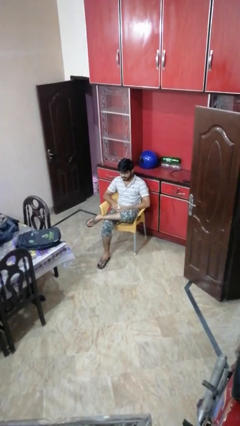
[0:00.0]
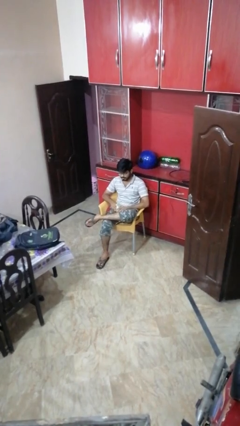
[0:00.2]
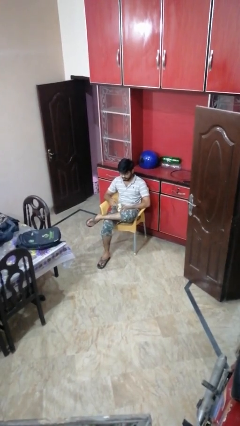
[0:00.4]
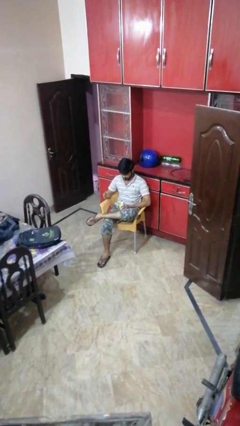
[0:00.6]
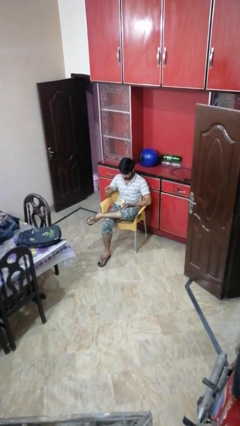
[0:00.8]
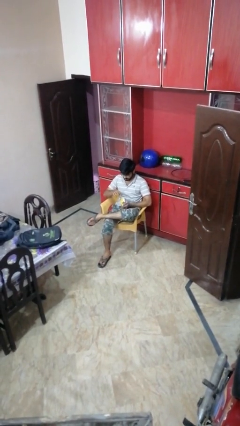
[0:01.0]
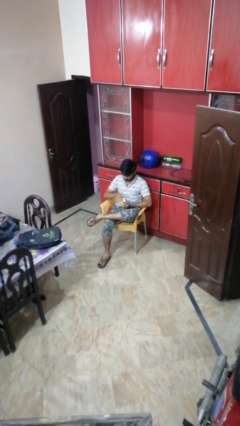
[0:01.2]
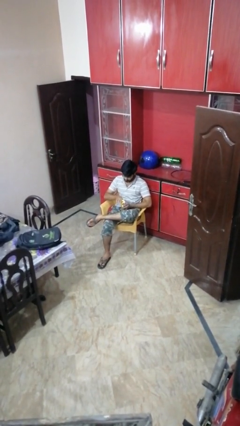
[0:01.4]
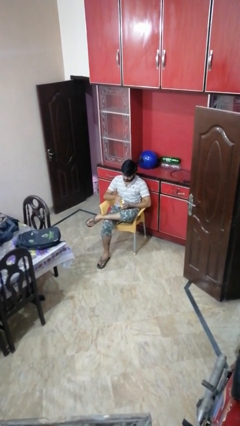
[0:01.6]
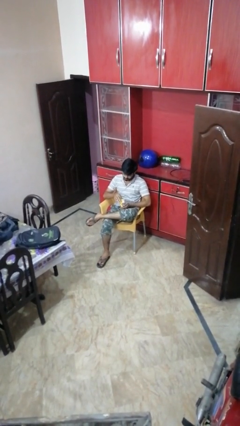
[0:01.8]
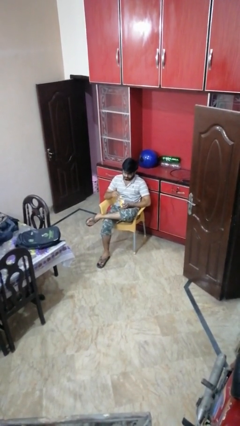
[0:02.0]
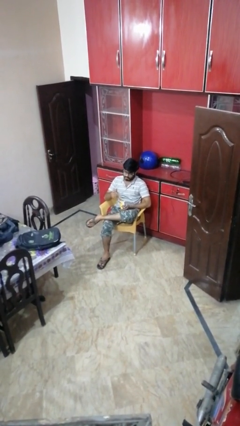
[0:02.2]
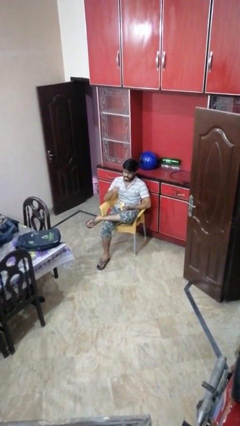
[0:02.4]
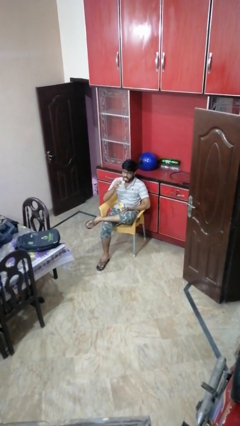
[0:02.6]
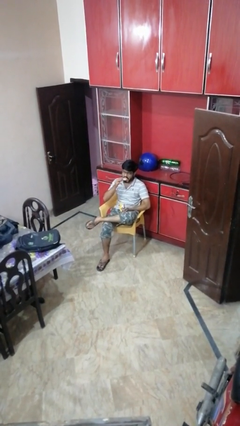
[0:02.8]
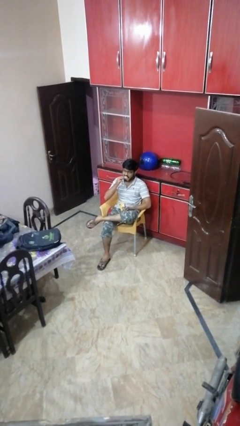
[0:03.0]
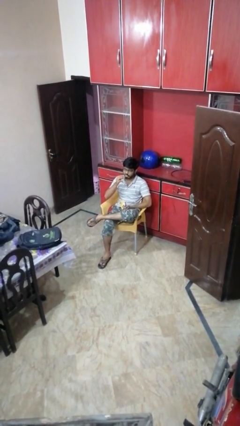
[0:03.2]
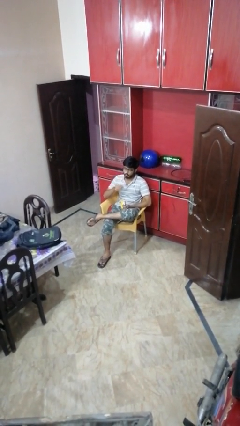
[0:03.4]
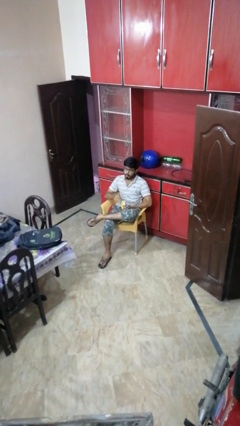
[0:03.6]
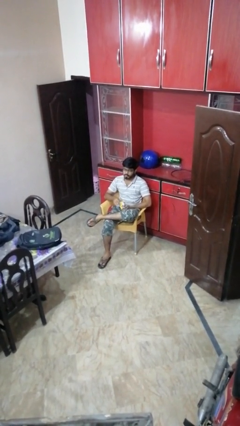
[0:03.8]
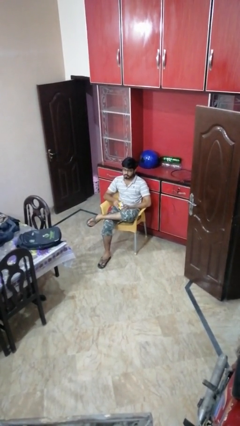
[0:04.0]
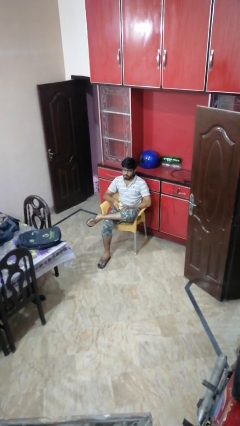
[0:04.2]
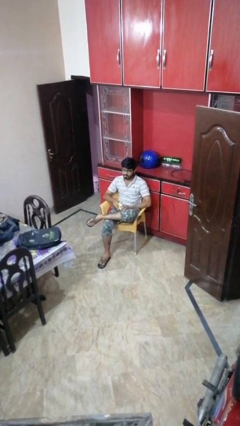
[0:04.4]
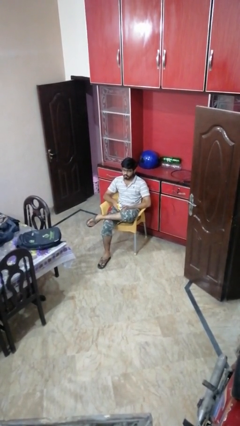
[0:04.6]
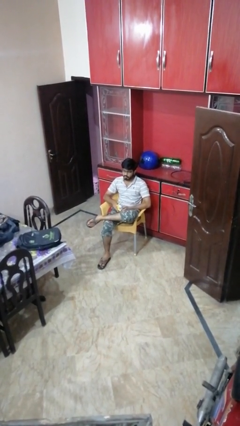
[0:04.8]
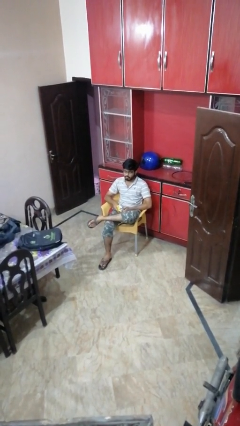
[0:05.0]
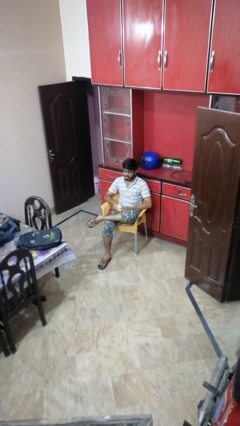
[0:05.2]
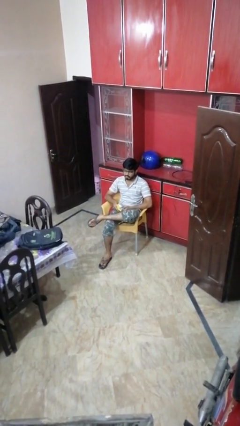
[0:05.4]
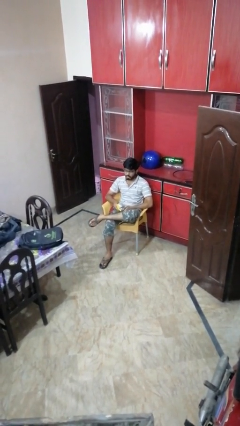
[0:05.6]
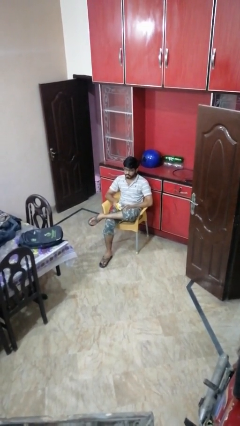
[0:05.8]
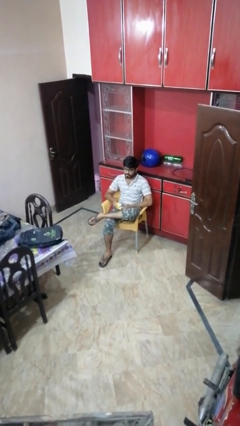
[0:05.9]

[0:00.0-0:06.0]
person eats snack from bag

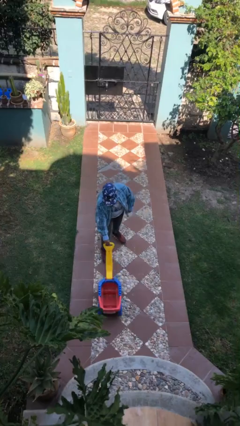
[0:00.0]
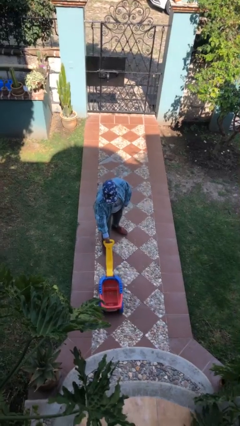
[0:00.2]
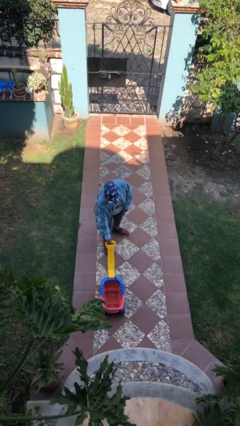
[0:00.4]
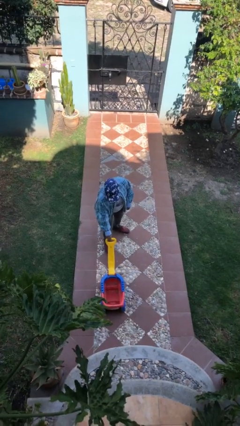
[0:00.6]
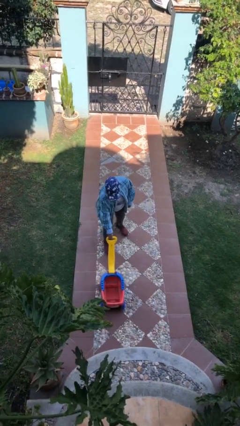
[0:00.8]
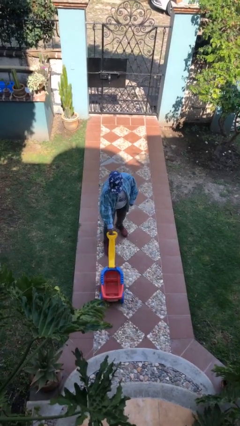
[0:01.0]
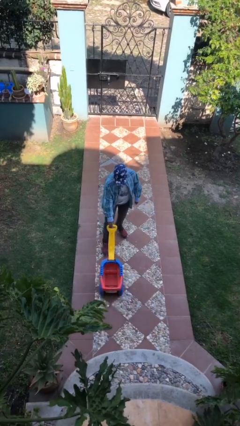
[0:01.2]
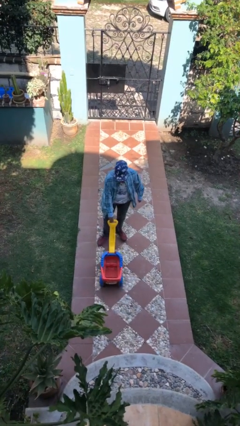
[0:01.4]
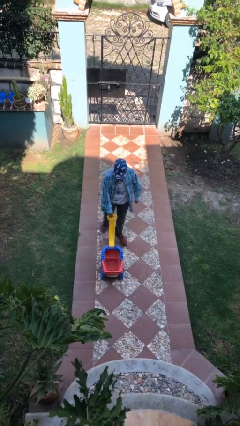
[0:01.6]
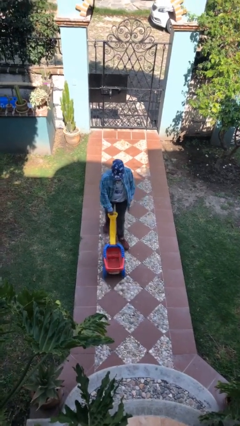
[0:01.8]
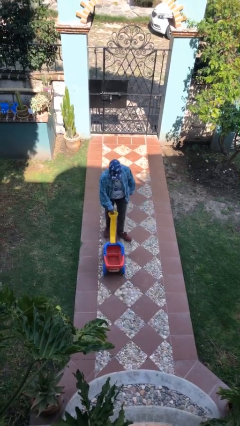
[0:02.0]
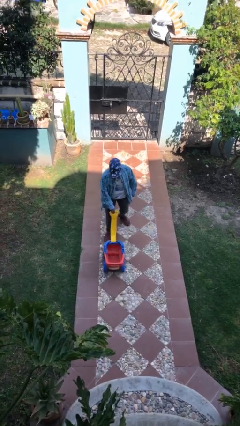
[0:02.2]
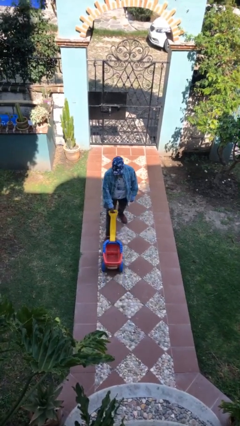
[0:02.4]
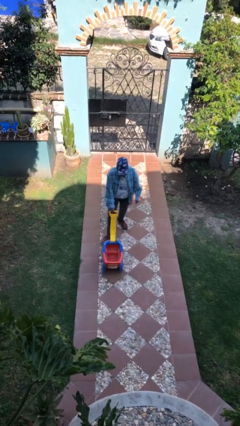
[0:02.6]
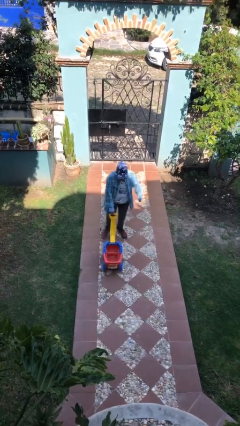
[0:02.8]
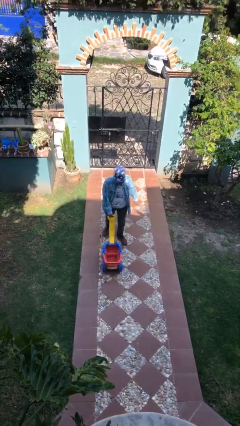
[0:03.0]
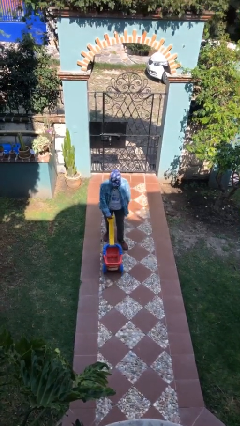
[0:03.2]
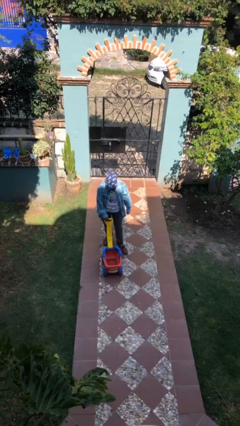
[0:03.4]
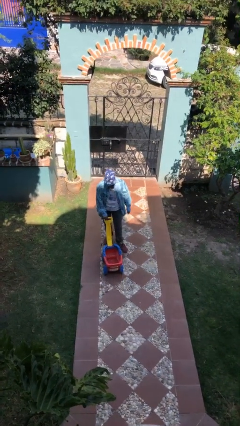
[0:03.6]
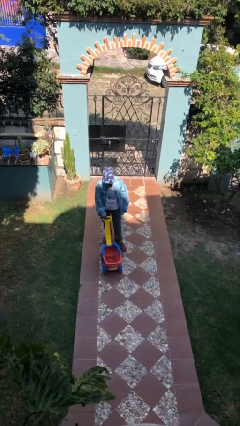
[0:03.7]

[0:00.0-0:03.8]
person pulls wheeled cart

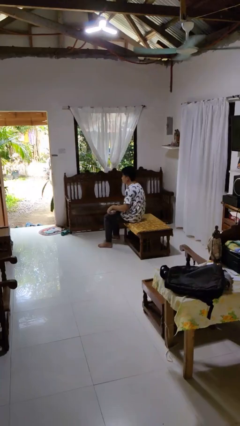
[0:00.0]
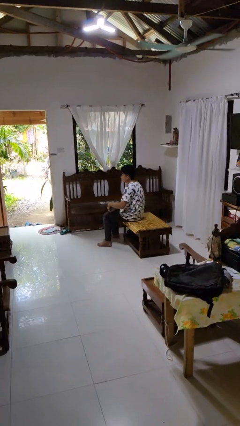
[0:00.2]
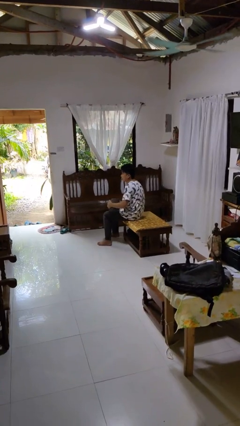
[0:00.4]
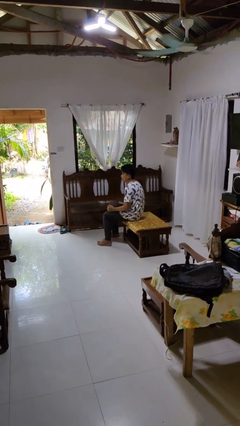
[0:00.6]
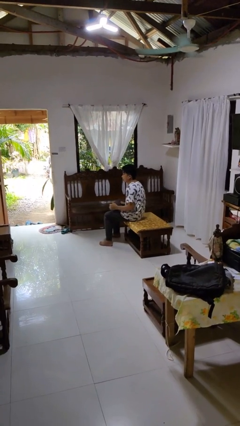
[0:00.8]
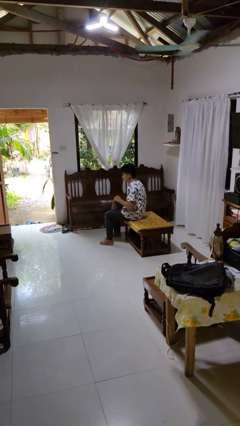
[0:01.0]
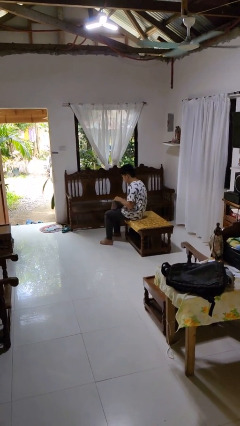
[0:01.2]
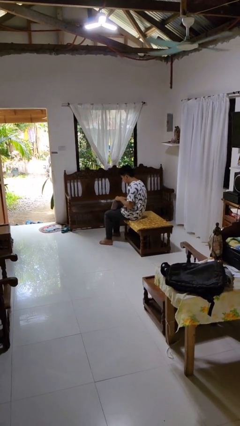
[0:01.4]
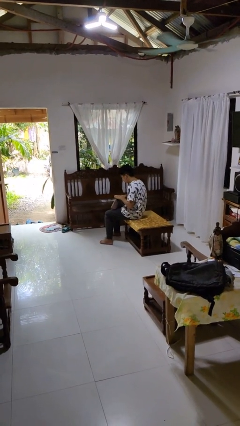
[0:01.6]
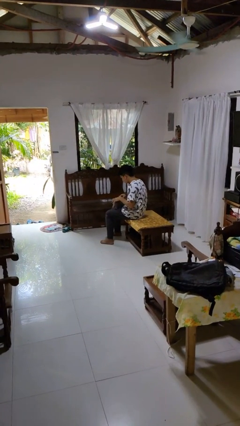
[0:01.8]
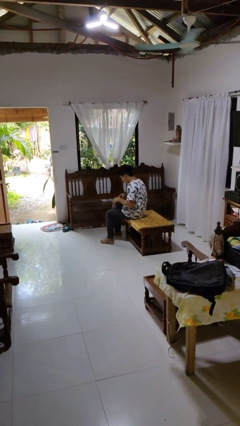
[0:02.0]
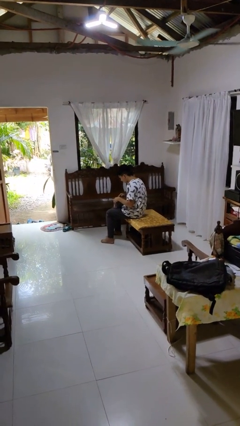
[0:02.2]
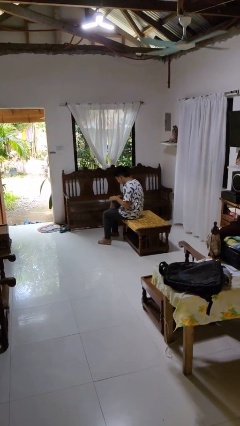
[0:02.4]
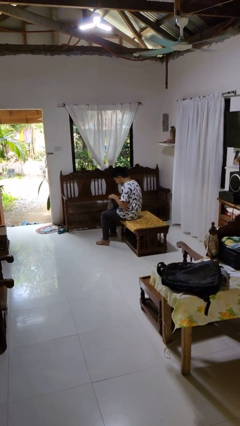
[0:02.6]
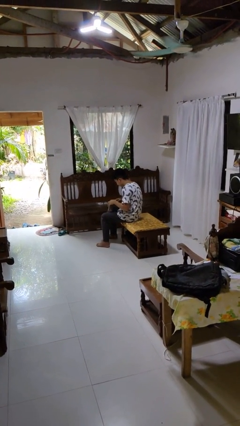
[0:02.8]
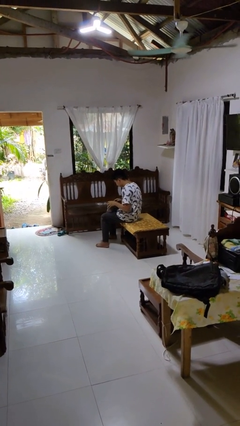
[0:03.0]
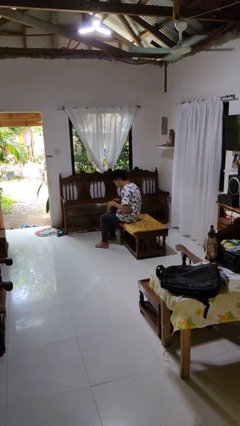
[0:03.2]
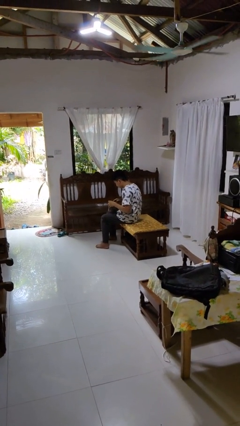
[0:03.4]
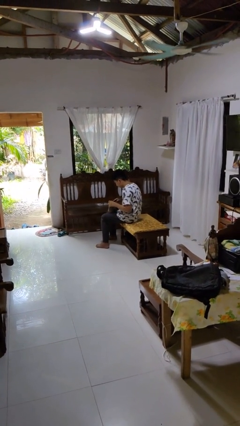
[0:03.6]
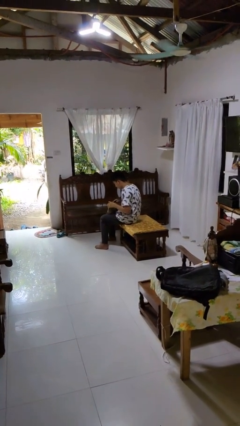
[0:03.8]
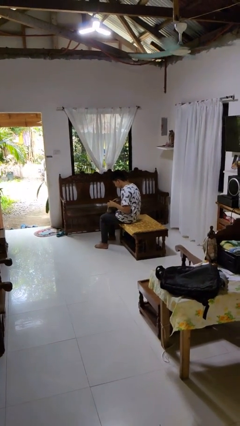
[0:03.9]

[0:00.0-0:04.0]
person searches in purse

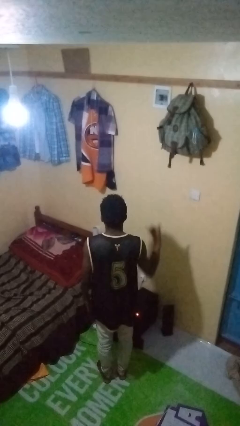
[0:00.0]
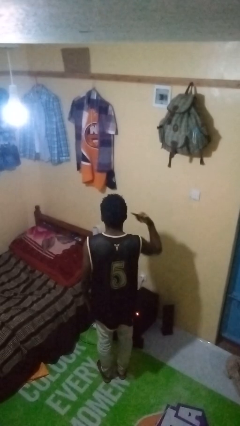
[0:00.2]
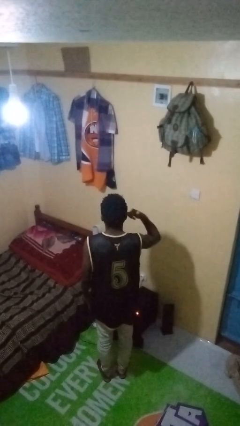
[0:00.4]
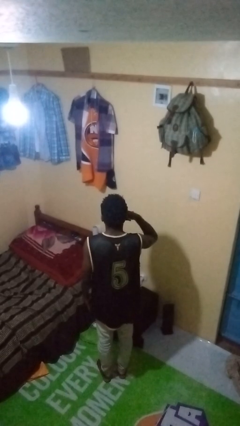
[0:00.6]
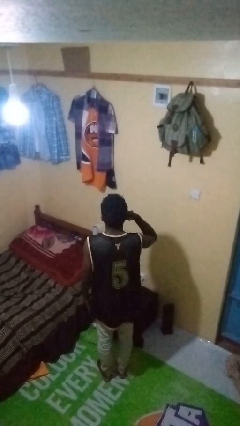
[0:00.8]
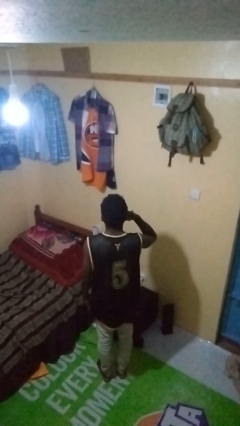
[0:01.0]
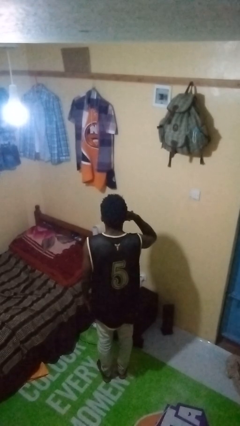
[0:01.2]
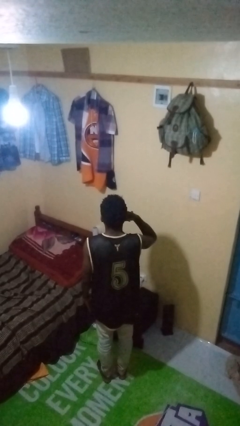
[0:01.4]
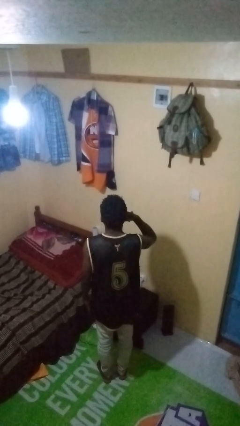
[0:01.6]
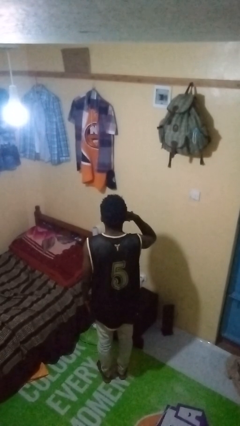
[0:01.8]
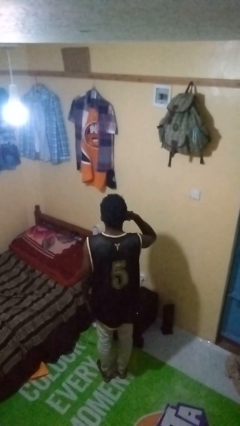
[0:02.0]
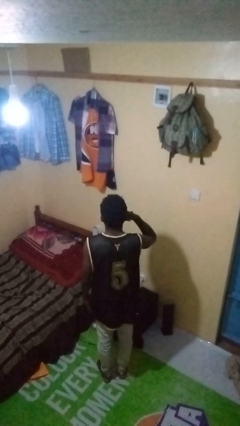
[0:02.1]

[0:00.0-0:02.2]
person gestures call me

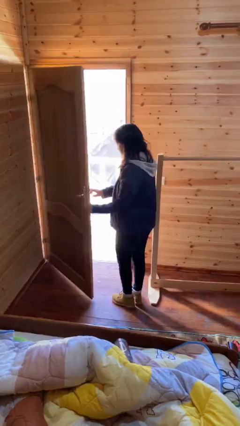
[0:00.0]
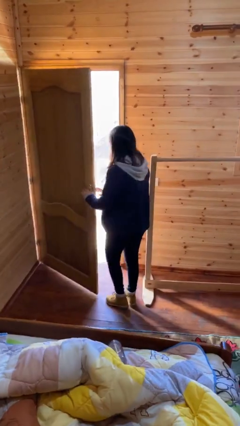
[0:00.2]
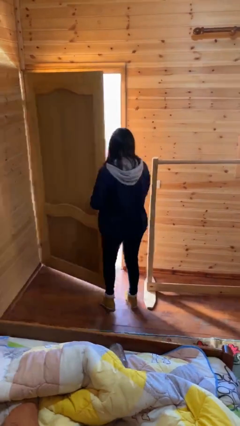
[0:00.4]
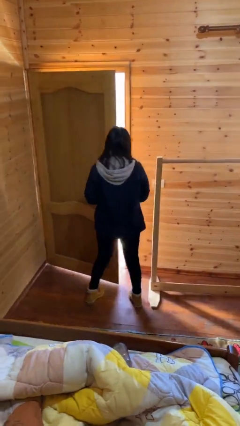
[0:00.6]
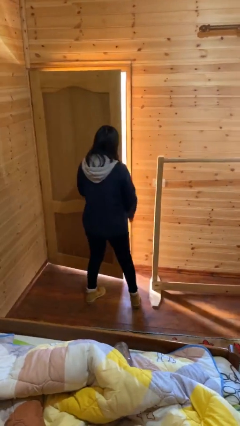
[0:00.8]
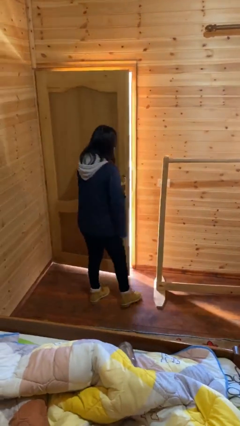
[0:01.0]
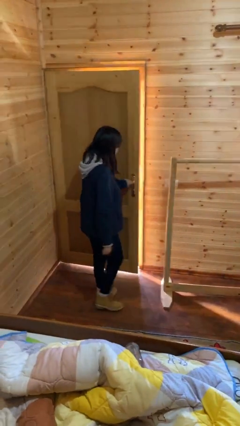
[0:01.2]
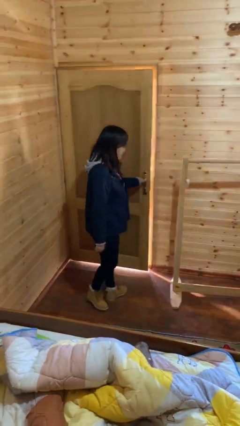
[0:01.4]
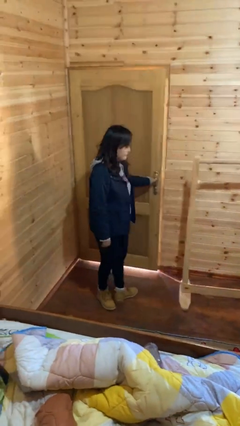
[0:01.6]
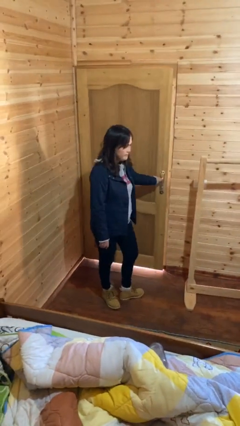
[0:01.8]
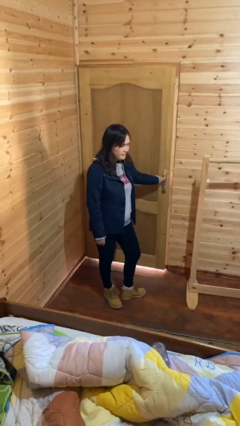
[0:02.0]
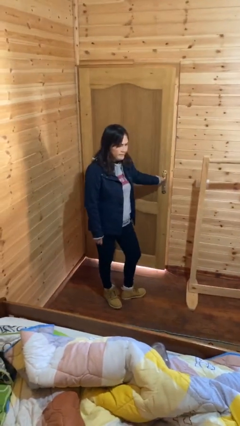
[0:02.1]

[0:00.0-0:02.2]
person closes facility door
